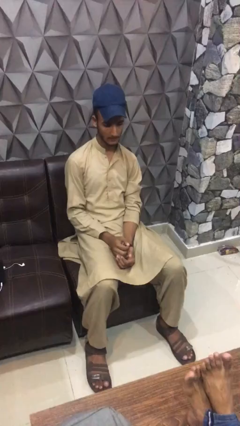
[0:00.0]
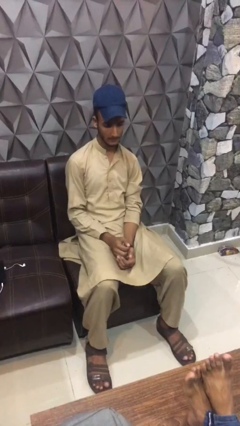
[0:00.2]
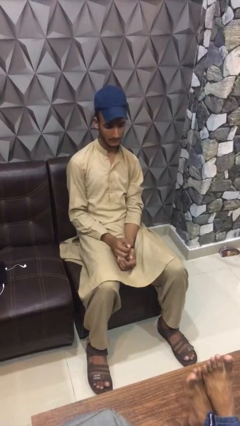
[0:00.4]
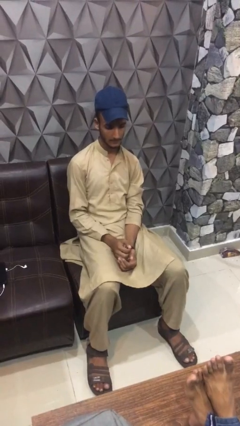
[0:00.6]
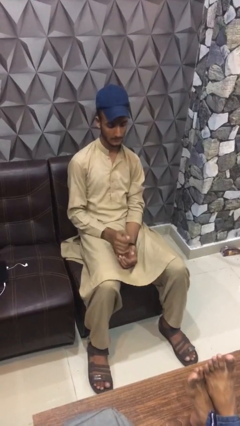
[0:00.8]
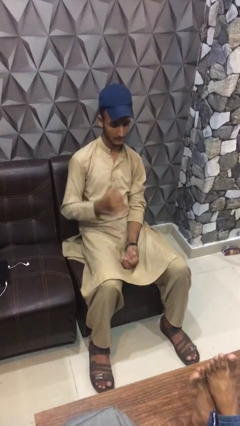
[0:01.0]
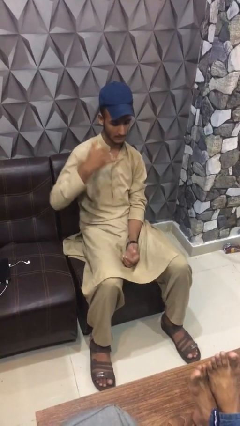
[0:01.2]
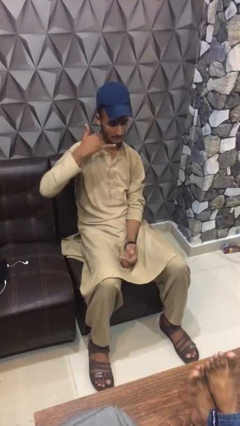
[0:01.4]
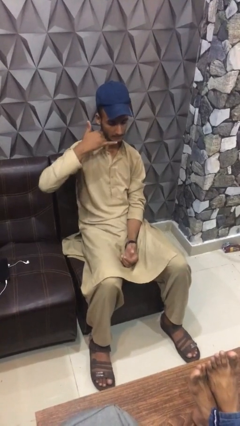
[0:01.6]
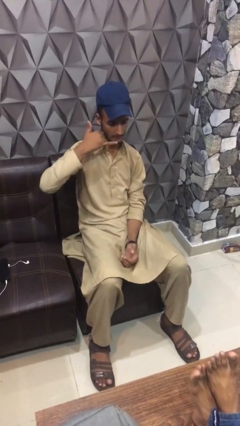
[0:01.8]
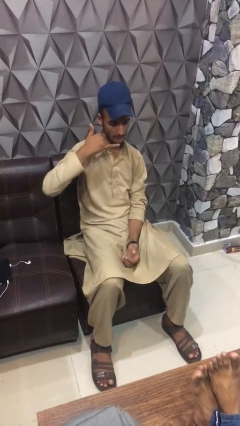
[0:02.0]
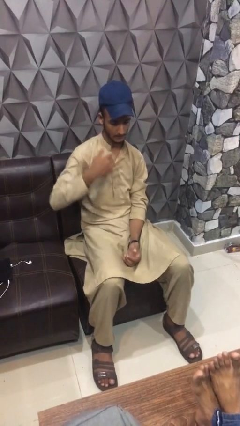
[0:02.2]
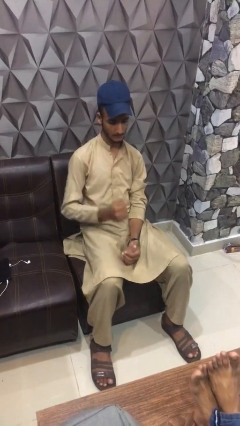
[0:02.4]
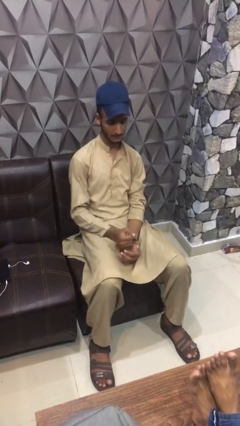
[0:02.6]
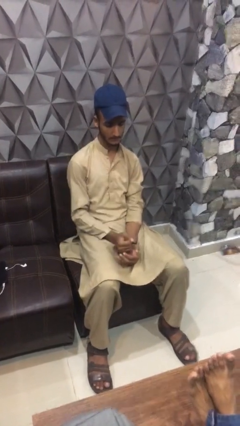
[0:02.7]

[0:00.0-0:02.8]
person gestures call me

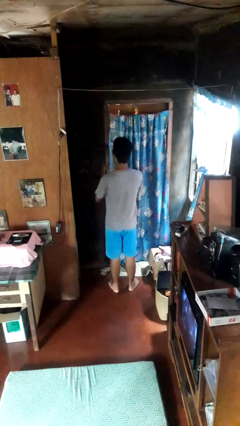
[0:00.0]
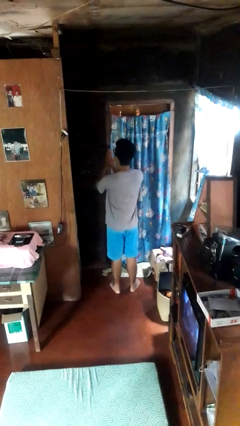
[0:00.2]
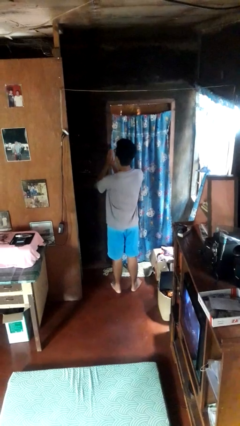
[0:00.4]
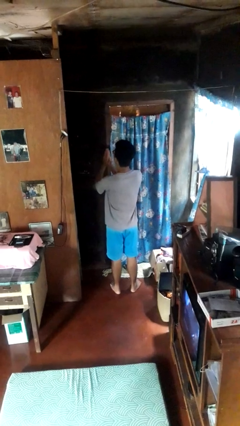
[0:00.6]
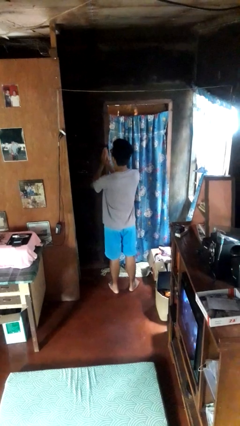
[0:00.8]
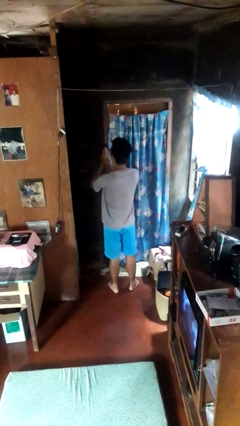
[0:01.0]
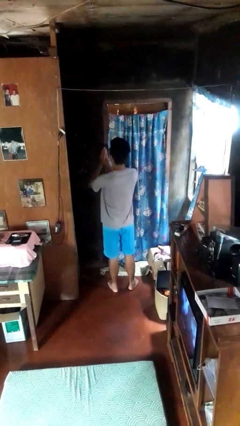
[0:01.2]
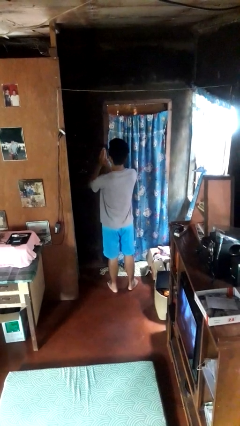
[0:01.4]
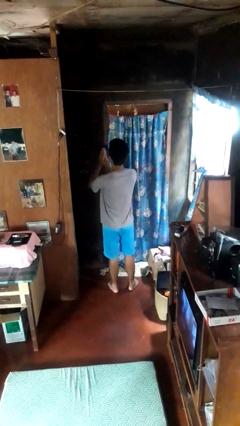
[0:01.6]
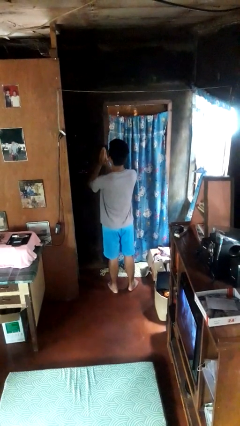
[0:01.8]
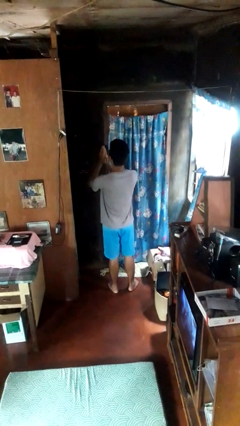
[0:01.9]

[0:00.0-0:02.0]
person prays

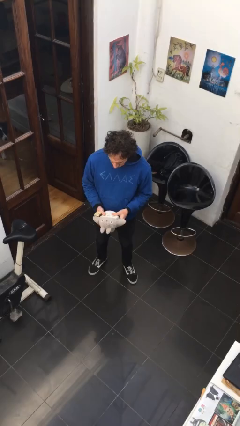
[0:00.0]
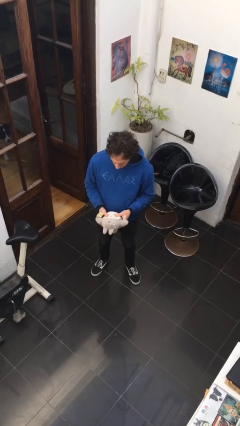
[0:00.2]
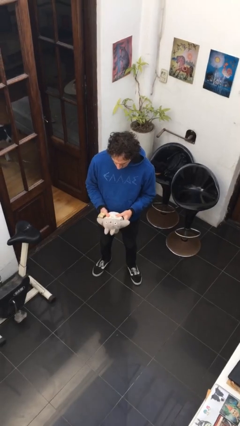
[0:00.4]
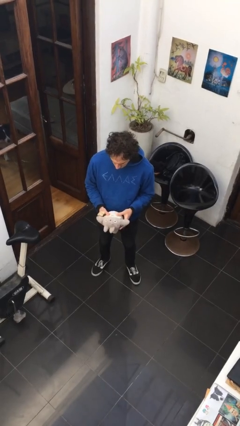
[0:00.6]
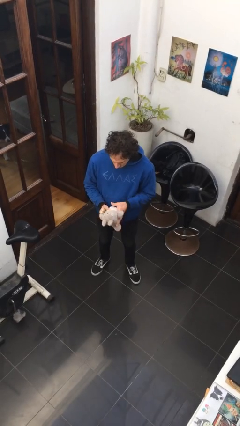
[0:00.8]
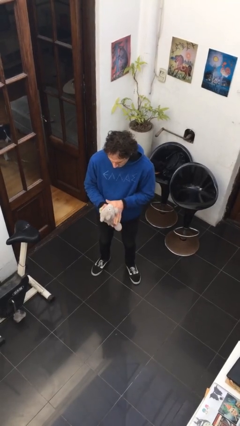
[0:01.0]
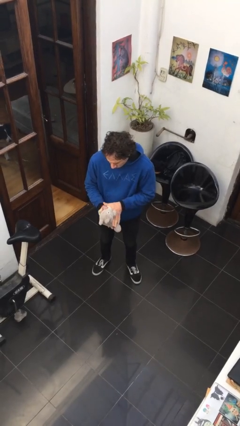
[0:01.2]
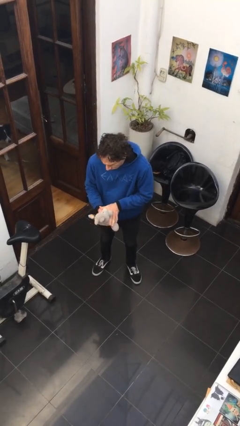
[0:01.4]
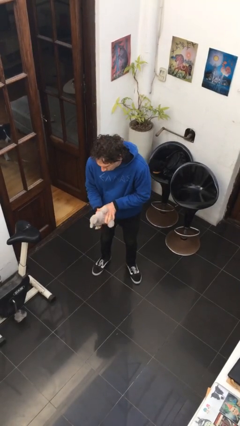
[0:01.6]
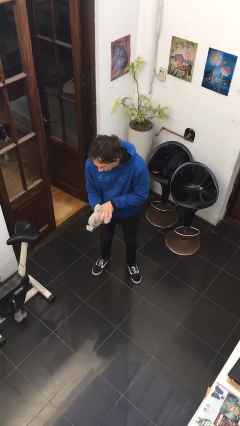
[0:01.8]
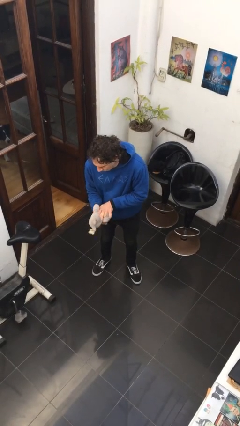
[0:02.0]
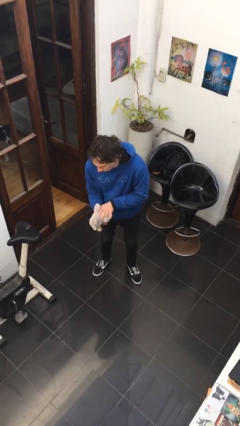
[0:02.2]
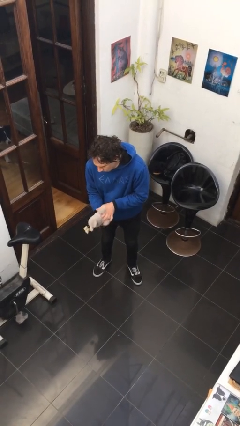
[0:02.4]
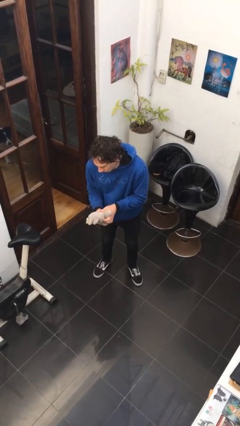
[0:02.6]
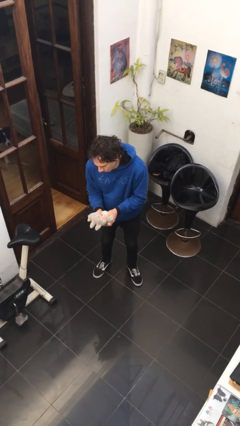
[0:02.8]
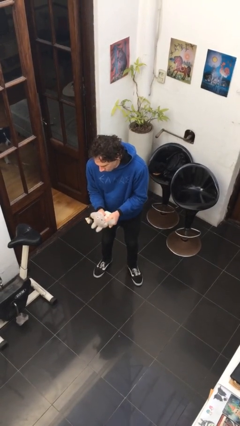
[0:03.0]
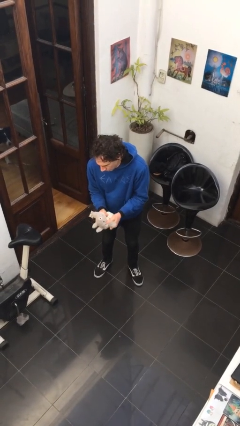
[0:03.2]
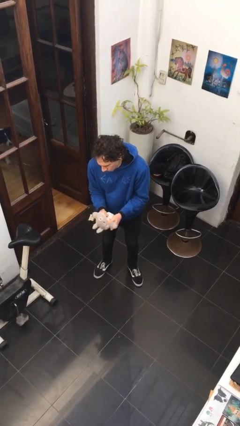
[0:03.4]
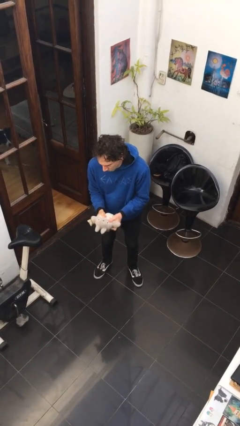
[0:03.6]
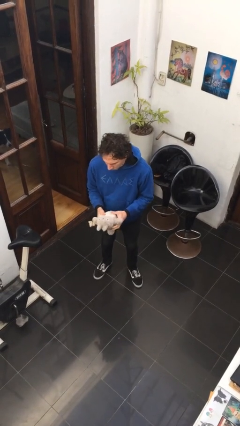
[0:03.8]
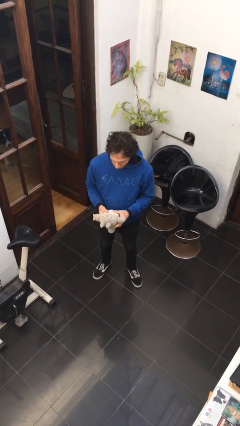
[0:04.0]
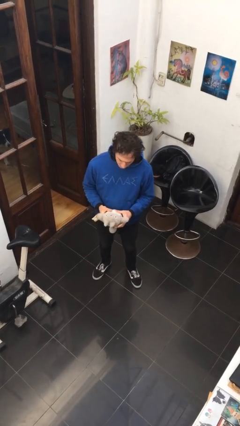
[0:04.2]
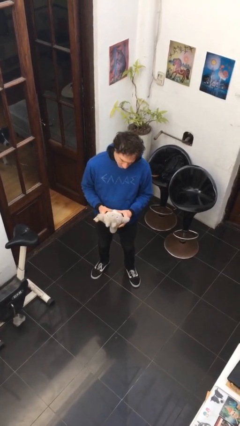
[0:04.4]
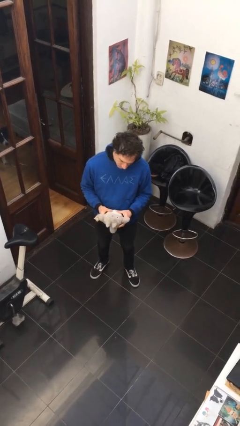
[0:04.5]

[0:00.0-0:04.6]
person squeezes object

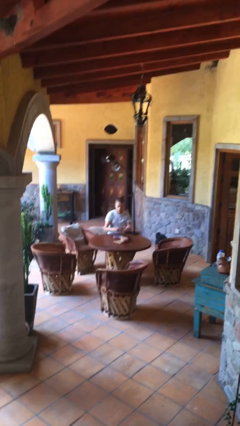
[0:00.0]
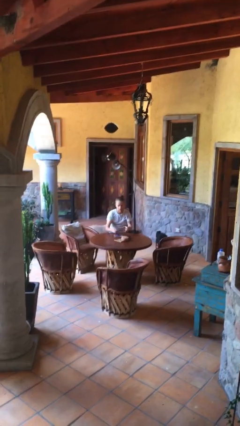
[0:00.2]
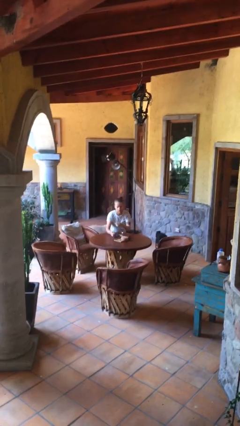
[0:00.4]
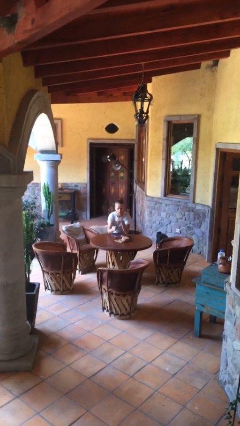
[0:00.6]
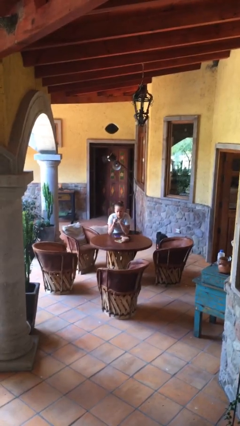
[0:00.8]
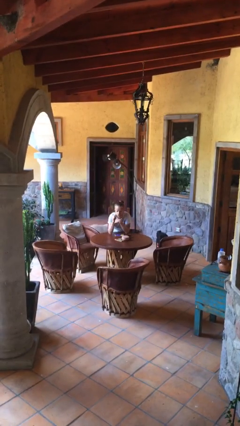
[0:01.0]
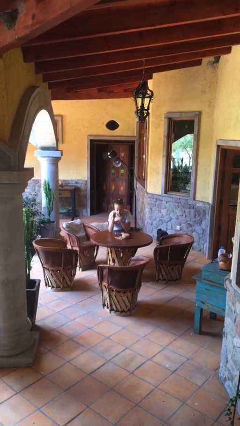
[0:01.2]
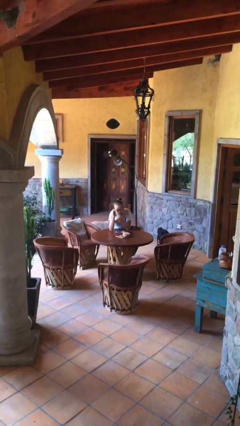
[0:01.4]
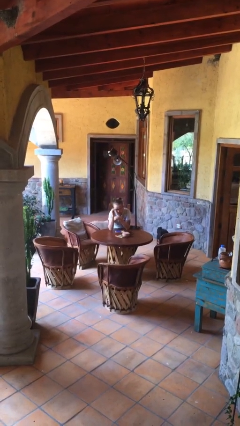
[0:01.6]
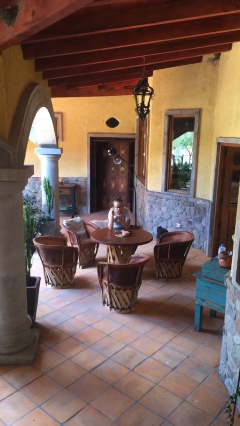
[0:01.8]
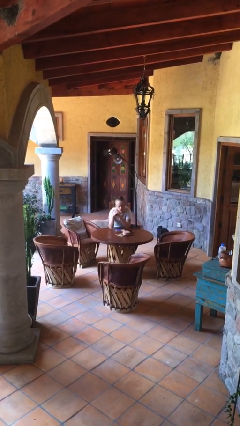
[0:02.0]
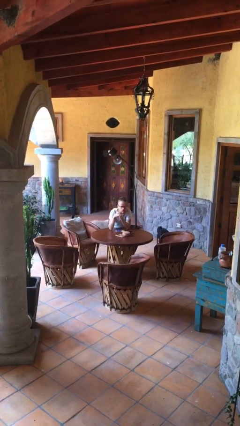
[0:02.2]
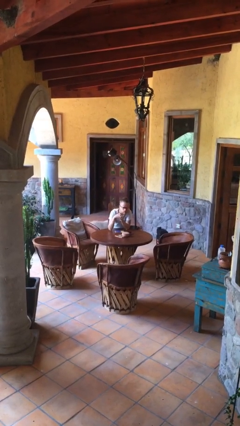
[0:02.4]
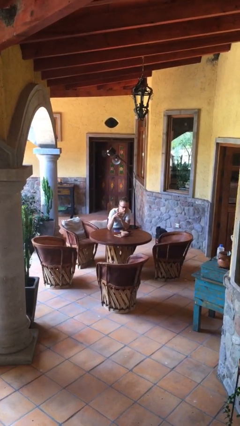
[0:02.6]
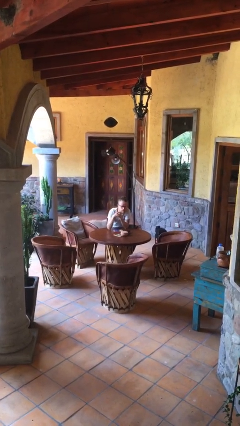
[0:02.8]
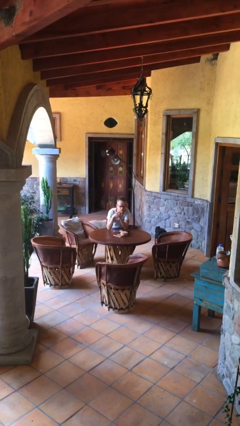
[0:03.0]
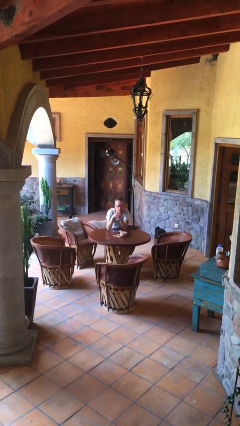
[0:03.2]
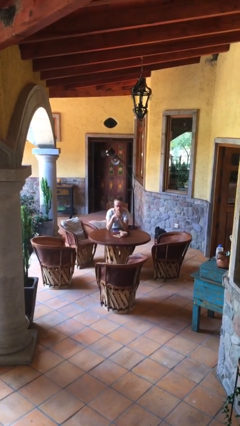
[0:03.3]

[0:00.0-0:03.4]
person puts on glasses

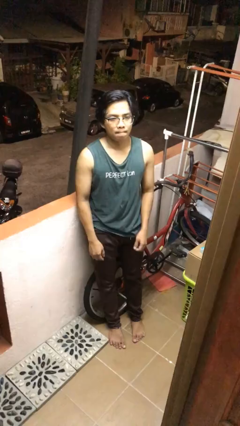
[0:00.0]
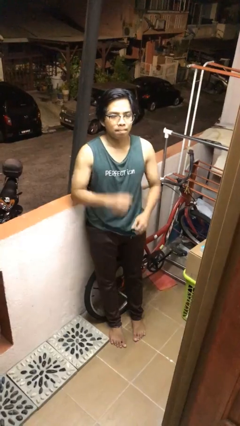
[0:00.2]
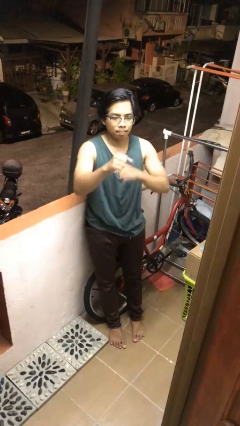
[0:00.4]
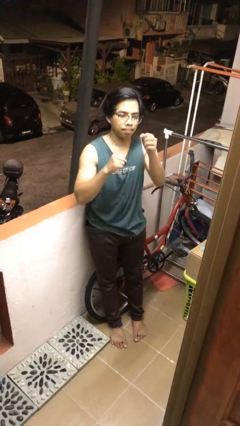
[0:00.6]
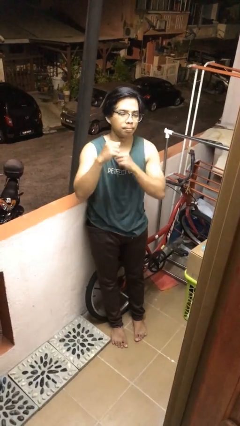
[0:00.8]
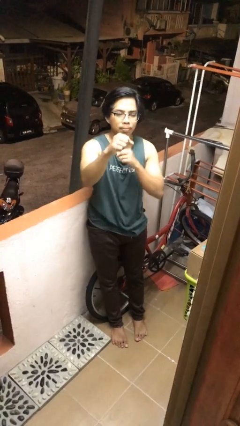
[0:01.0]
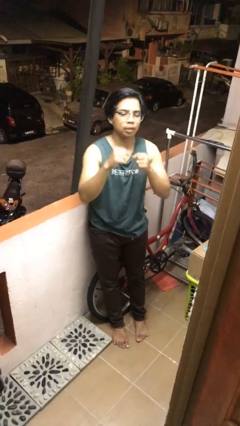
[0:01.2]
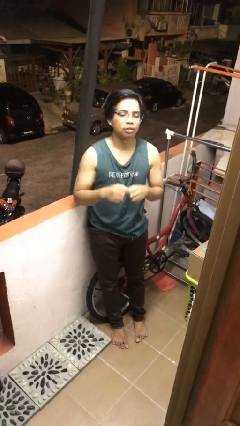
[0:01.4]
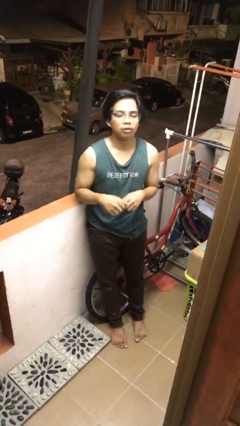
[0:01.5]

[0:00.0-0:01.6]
person punches

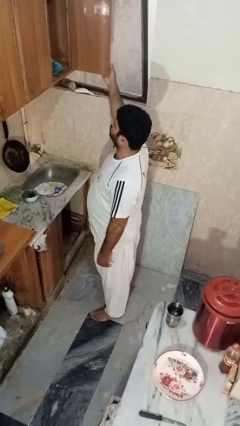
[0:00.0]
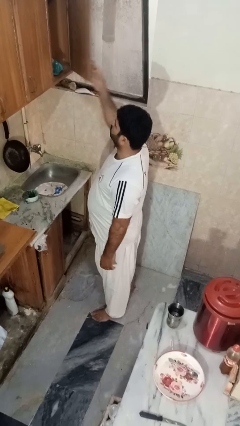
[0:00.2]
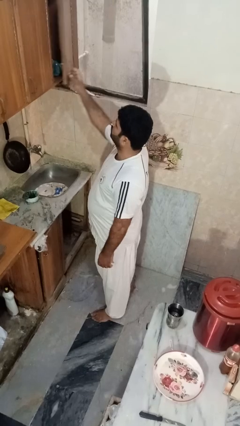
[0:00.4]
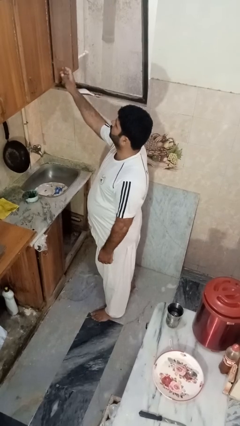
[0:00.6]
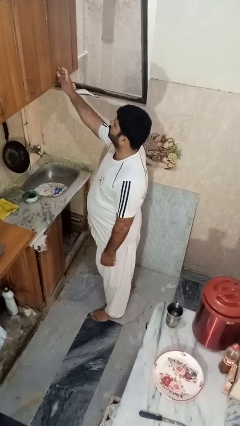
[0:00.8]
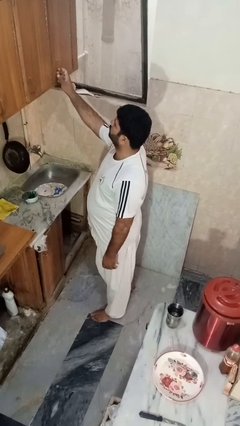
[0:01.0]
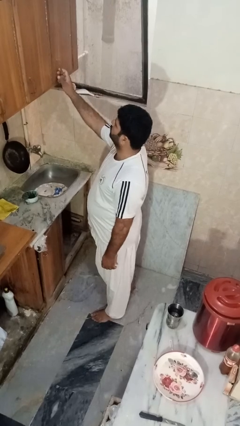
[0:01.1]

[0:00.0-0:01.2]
person closes cabinet

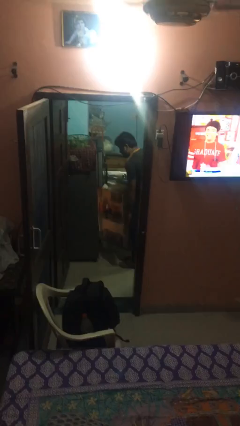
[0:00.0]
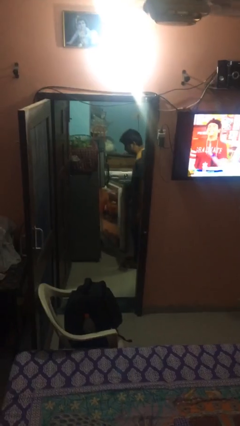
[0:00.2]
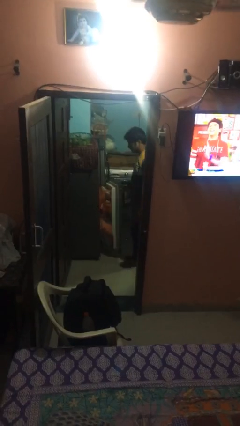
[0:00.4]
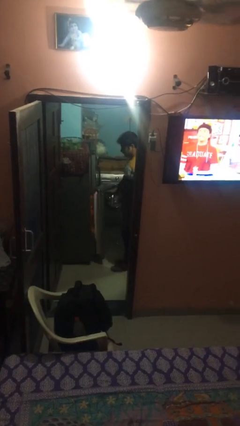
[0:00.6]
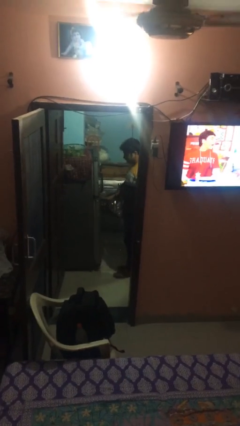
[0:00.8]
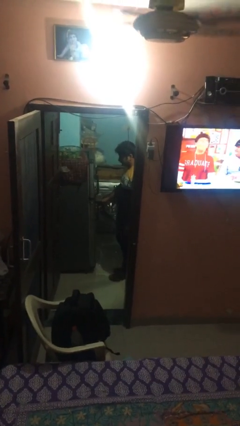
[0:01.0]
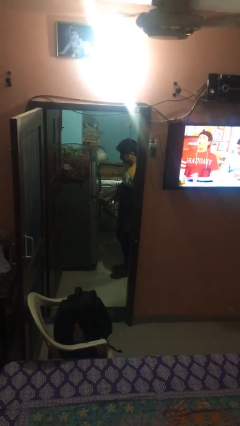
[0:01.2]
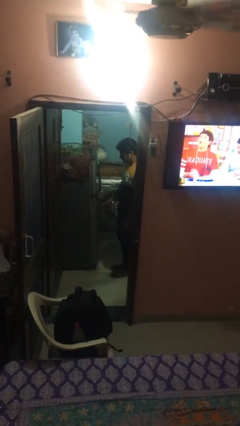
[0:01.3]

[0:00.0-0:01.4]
person closes refrigerator

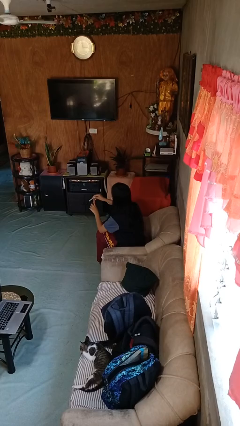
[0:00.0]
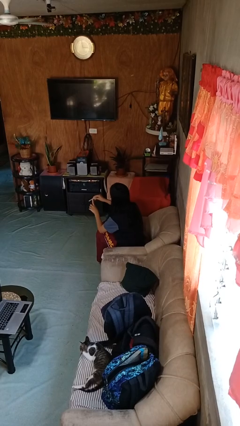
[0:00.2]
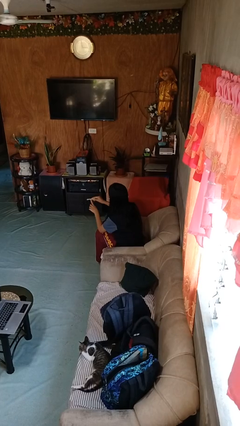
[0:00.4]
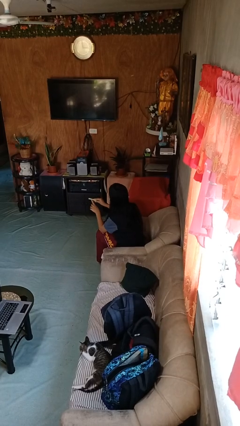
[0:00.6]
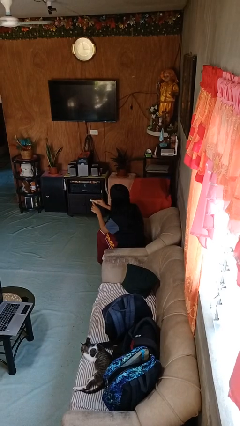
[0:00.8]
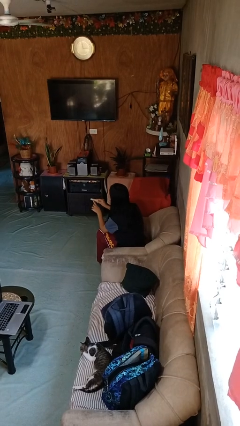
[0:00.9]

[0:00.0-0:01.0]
person files fingernails
